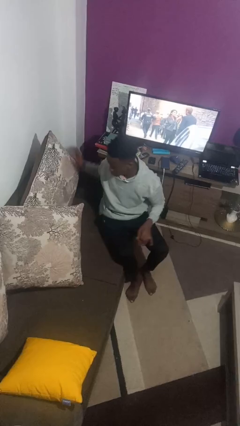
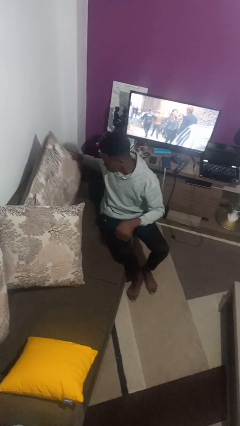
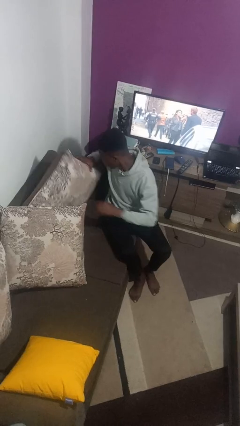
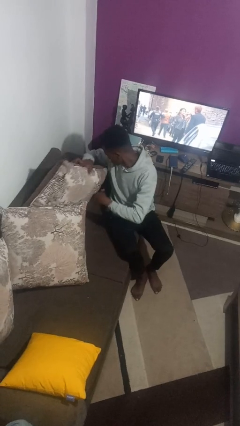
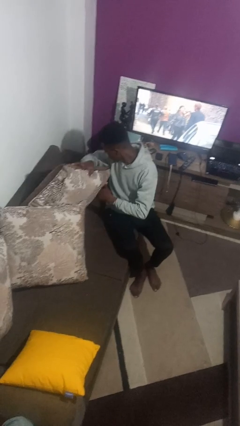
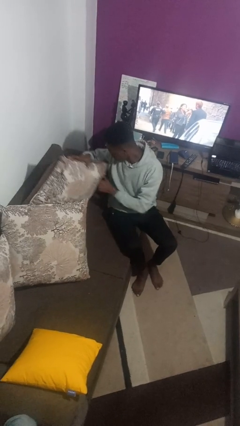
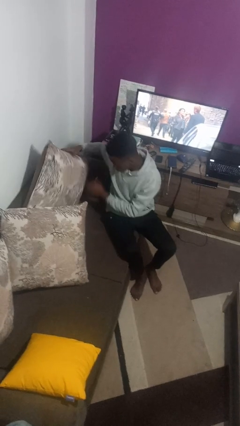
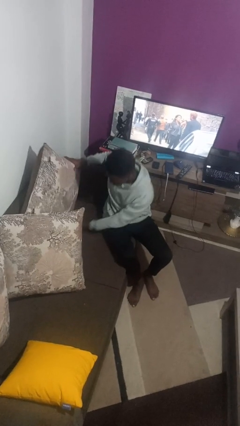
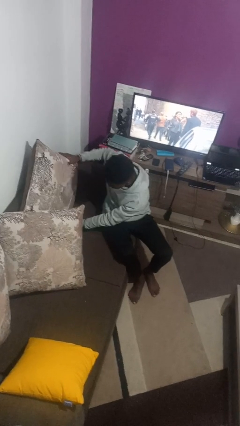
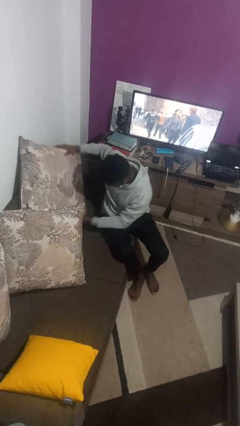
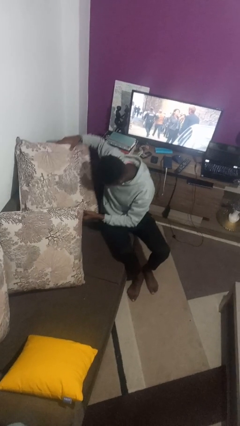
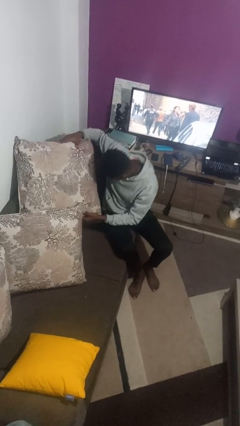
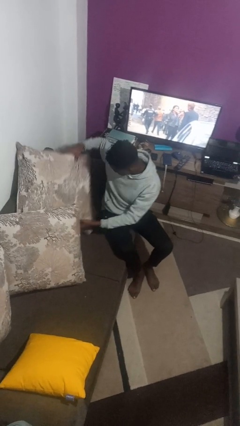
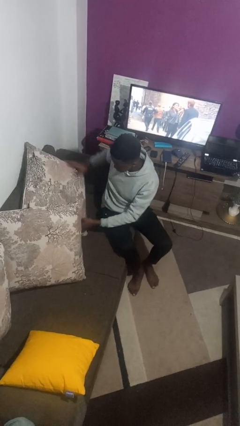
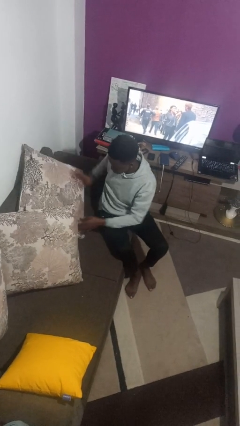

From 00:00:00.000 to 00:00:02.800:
person searches in couch

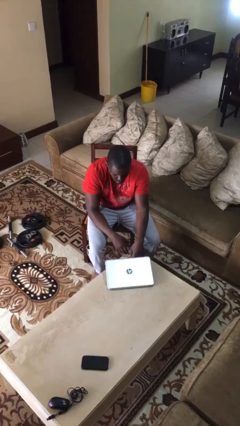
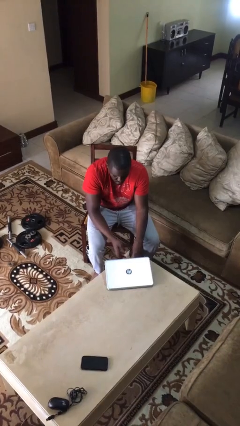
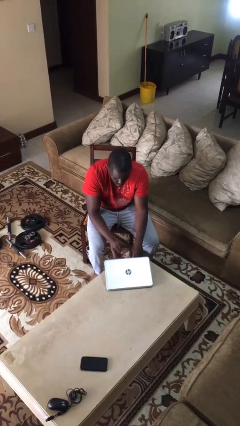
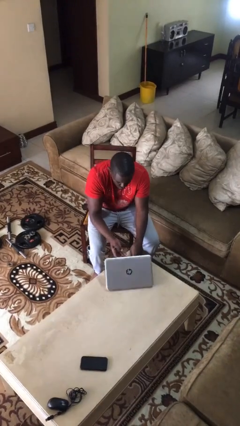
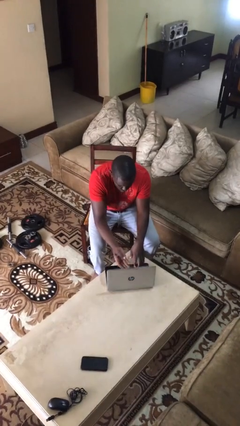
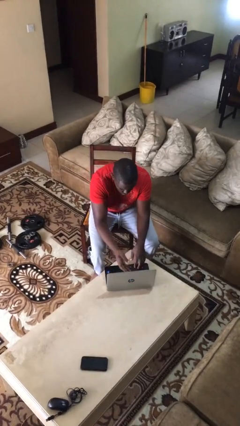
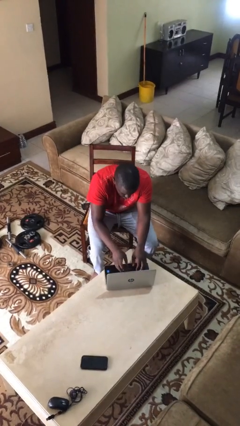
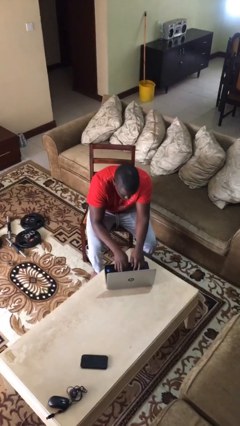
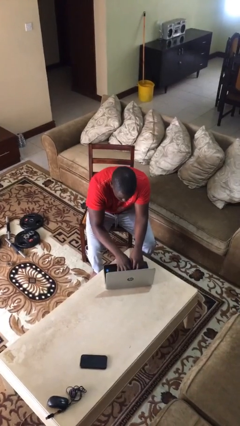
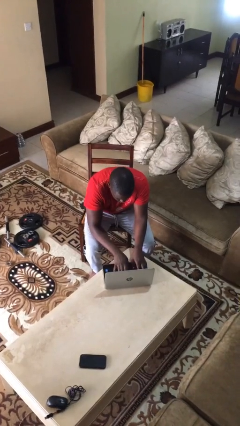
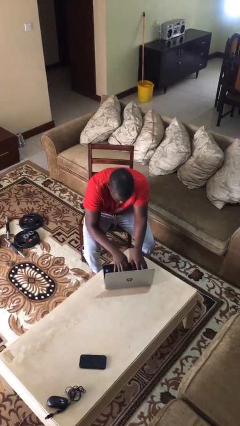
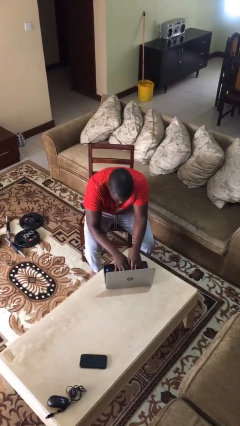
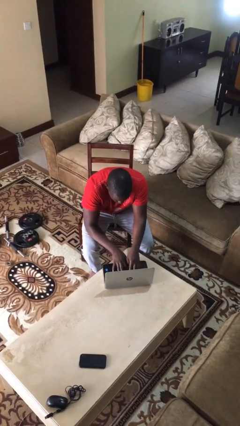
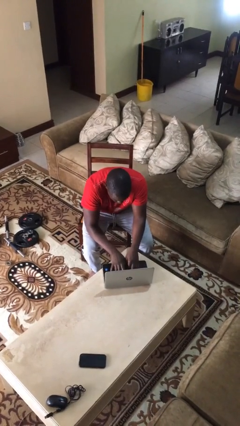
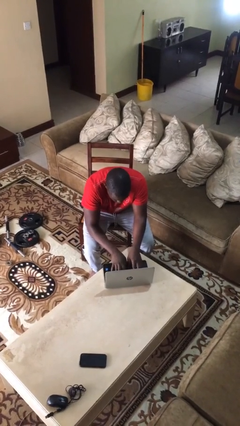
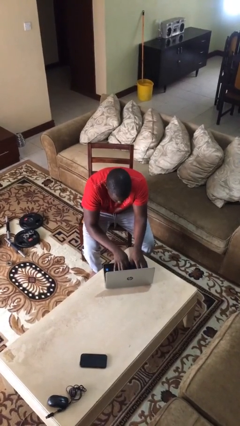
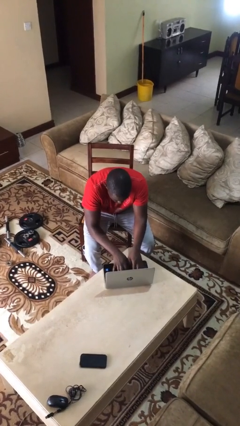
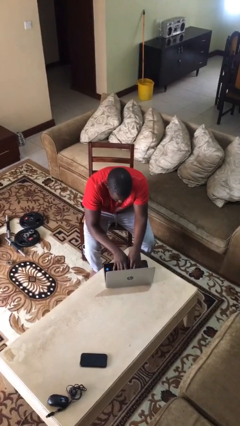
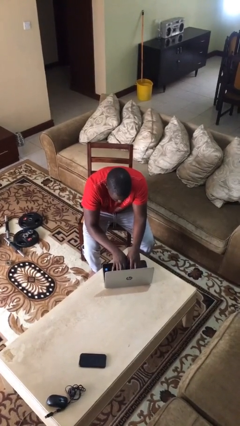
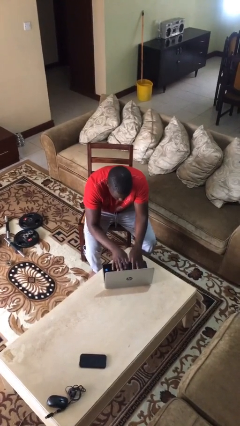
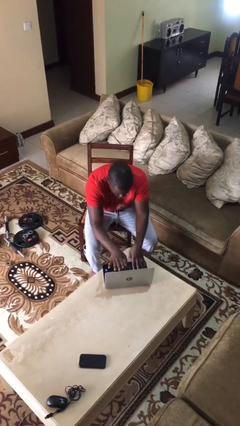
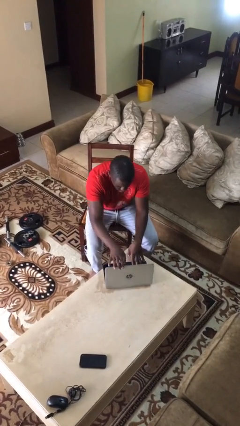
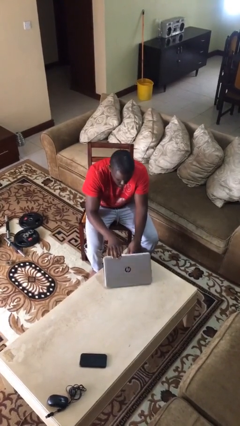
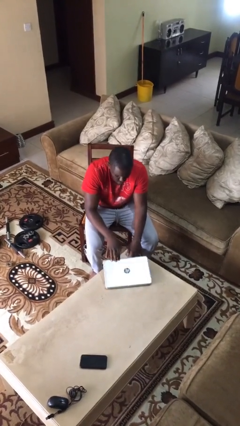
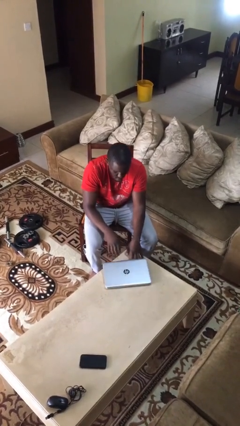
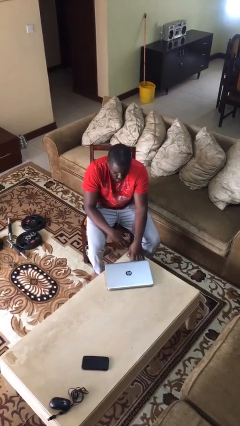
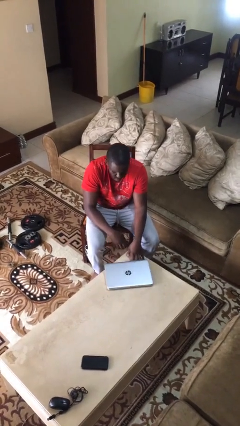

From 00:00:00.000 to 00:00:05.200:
person interacts with laptop

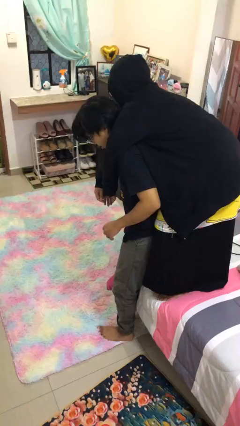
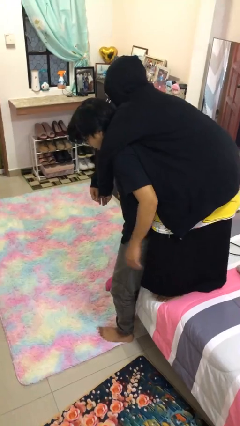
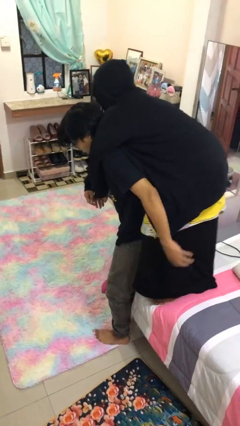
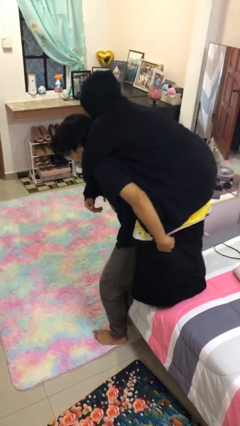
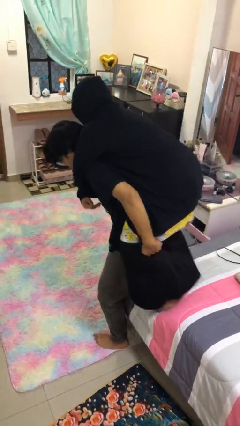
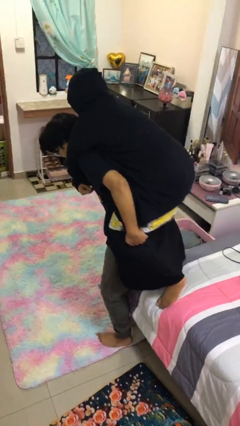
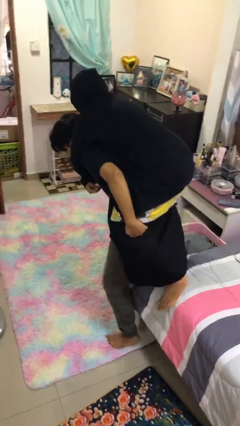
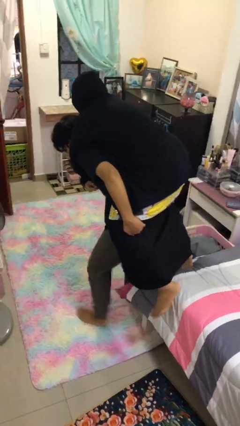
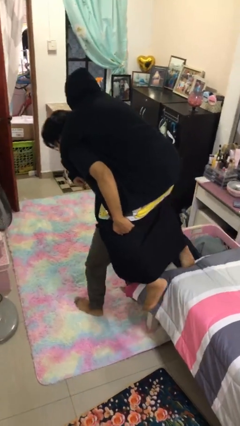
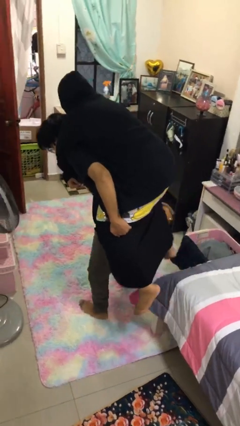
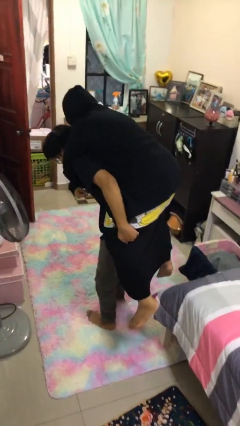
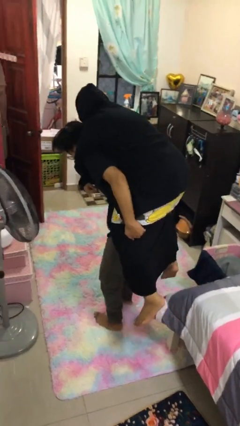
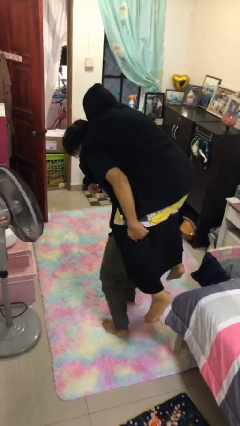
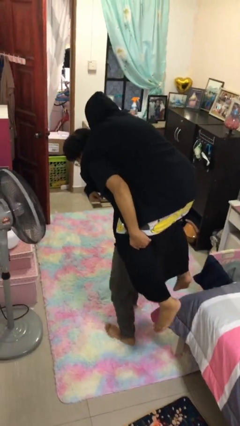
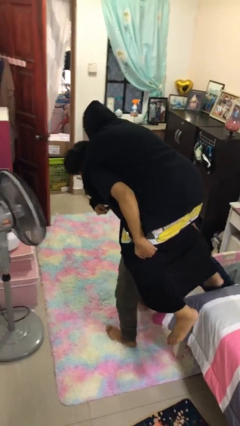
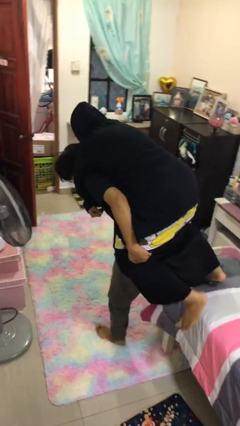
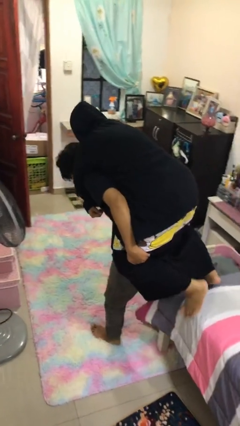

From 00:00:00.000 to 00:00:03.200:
person carries person over shoulder

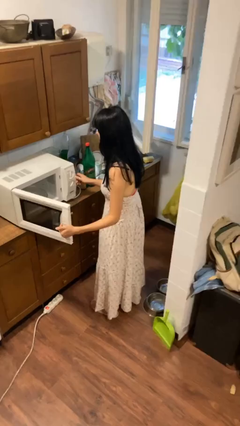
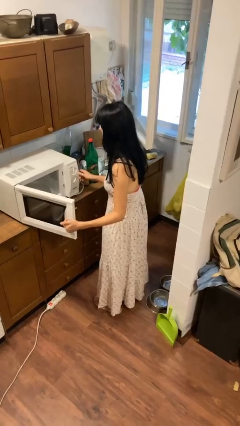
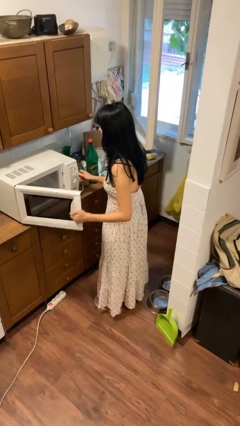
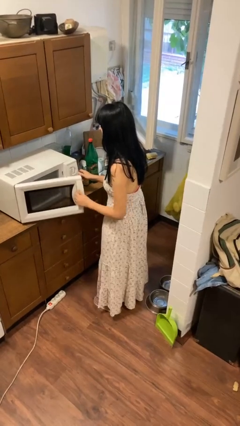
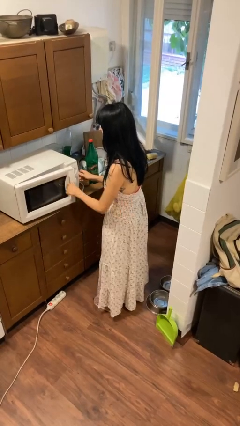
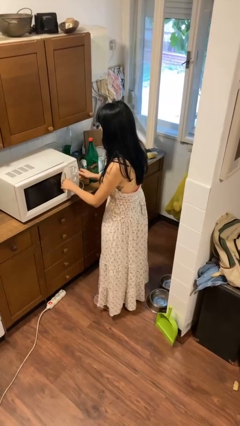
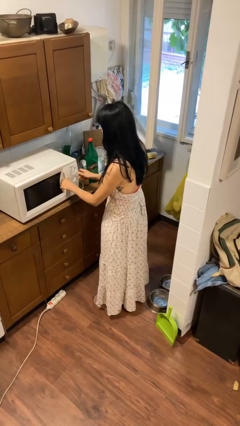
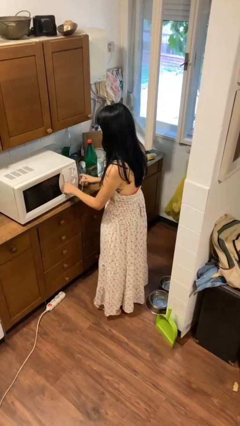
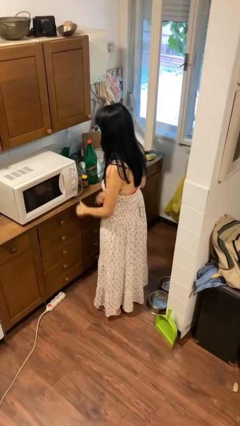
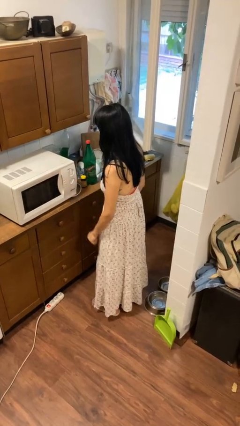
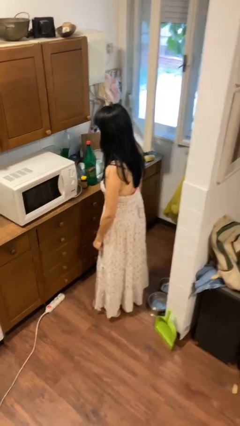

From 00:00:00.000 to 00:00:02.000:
person closes microwave

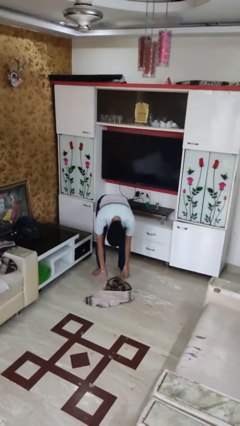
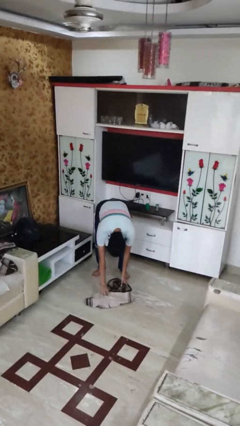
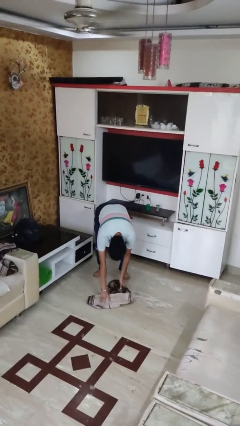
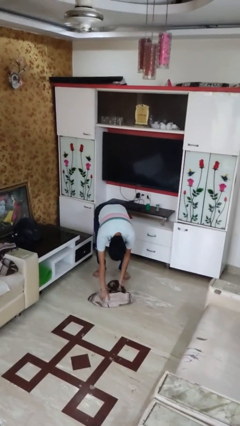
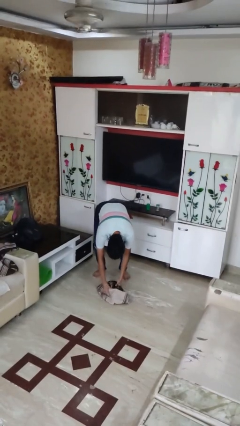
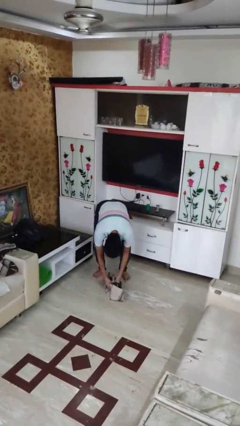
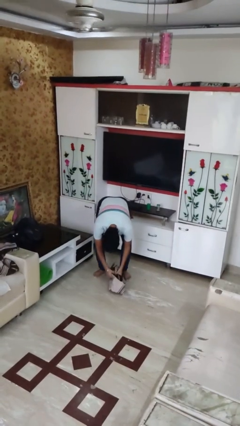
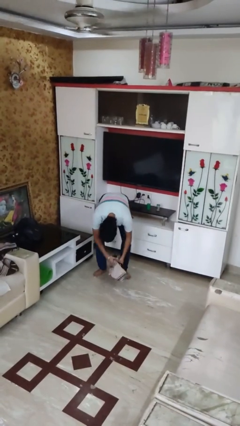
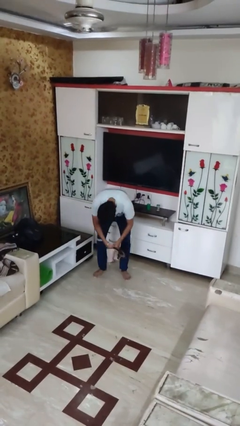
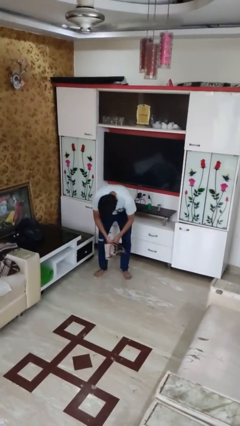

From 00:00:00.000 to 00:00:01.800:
person picks up object from floor

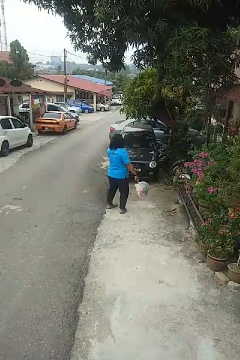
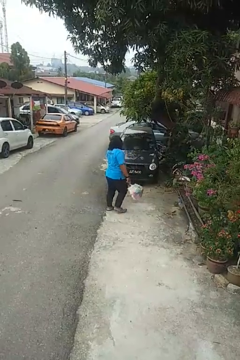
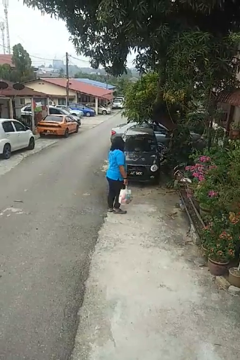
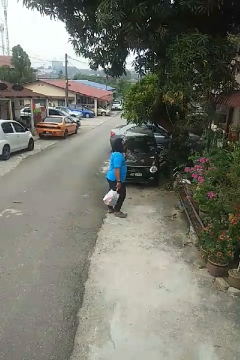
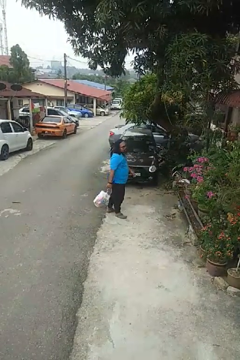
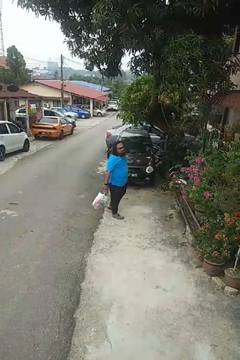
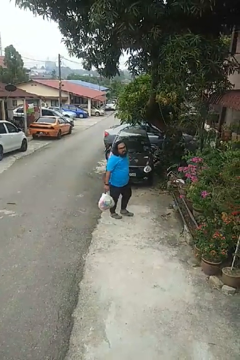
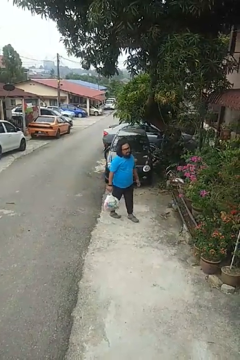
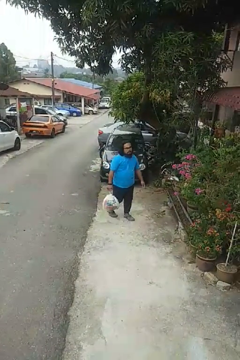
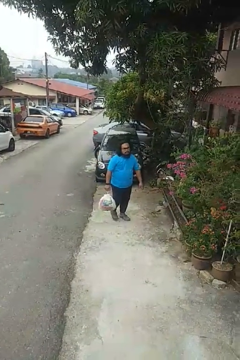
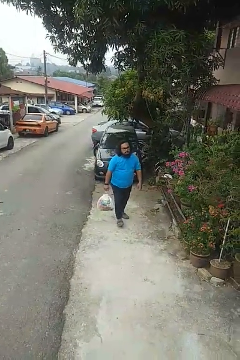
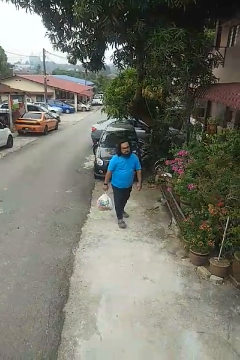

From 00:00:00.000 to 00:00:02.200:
person carries groceries

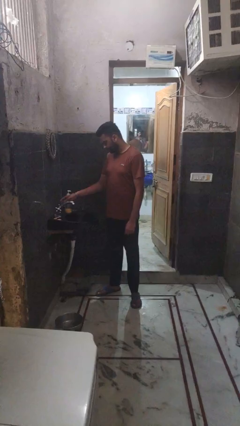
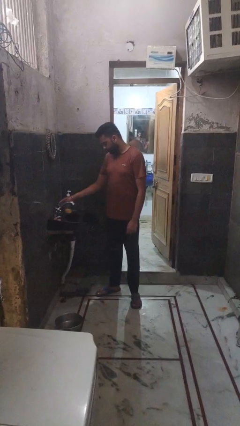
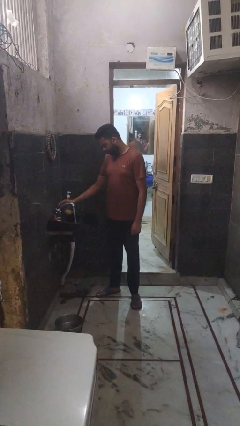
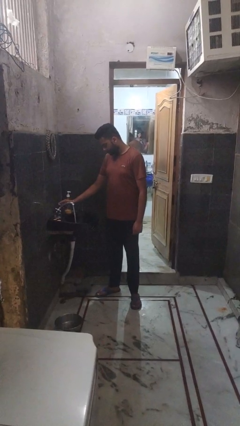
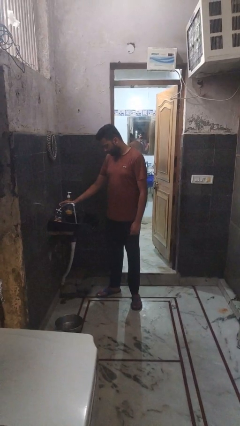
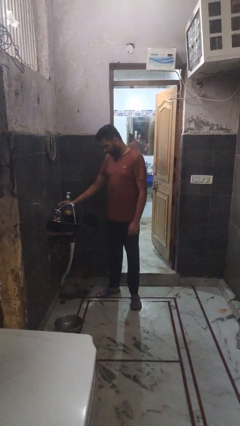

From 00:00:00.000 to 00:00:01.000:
person turns on faucet
